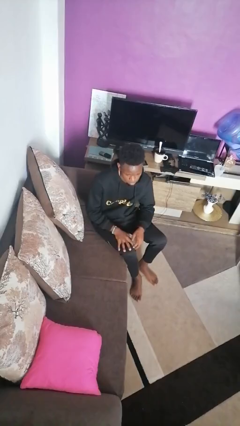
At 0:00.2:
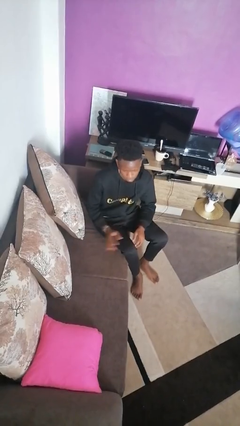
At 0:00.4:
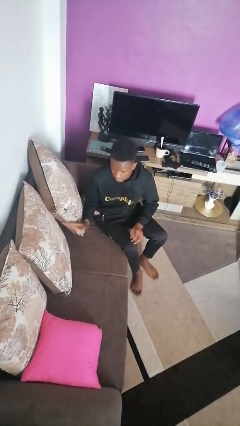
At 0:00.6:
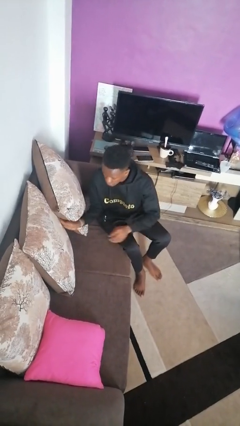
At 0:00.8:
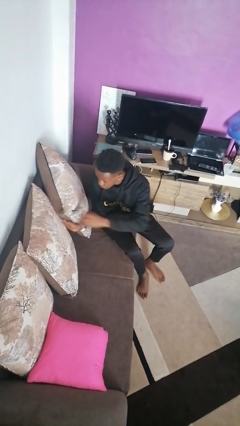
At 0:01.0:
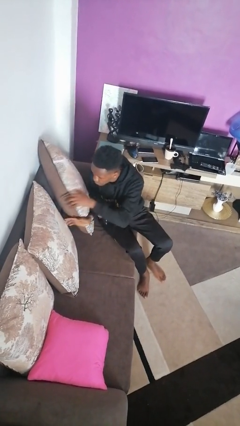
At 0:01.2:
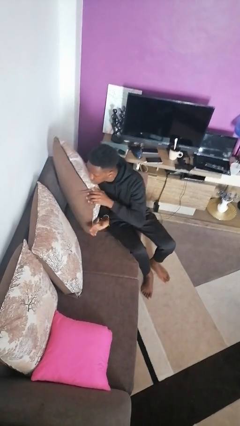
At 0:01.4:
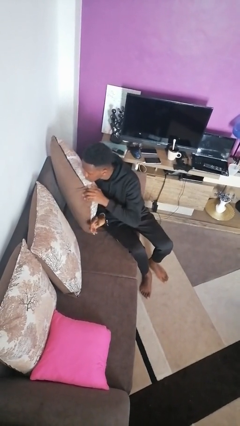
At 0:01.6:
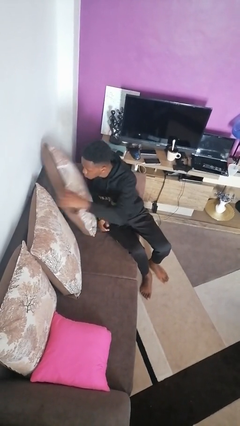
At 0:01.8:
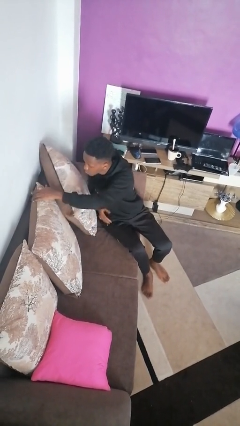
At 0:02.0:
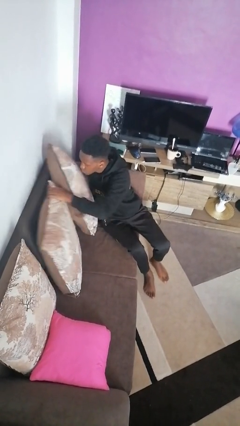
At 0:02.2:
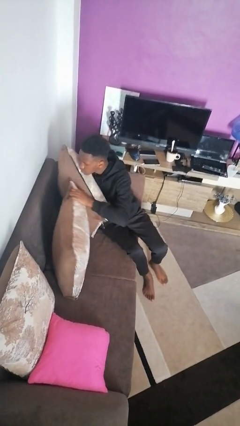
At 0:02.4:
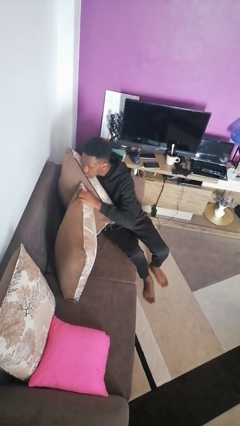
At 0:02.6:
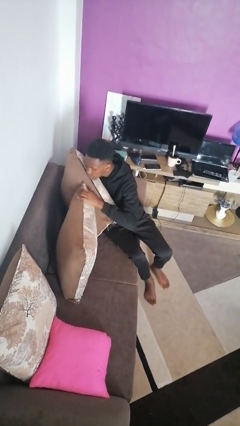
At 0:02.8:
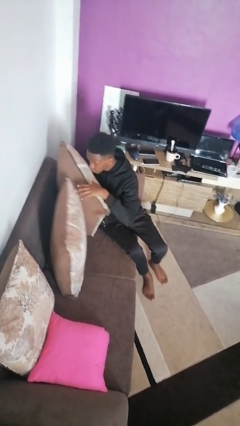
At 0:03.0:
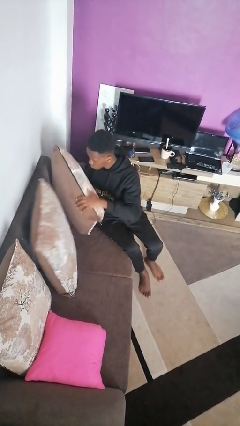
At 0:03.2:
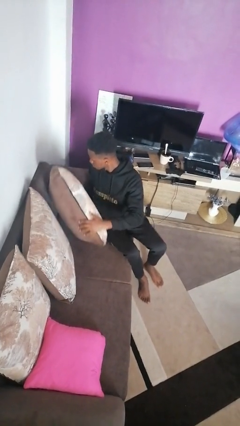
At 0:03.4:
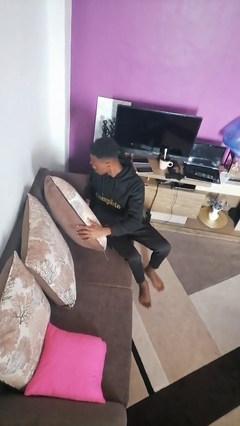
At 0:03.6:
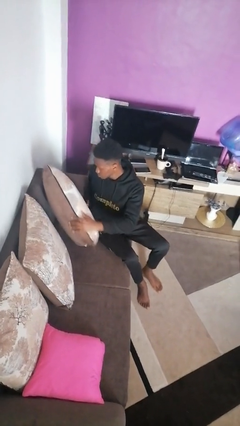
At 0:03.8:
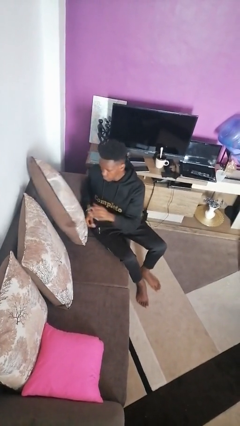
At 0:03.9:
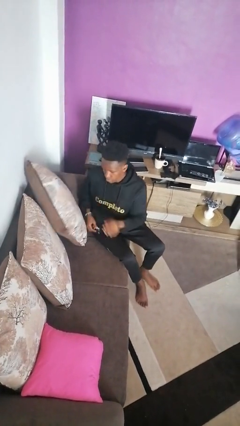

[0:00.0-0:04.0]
person searches in couch

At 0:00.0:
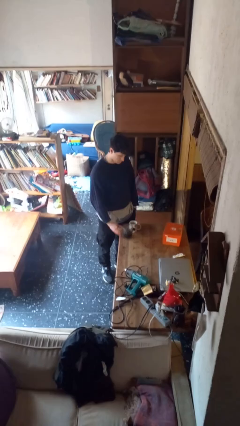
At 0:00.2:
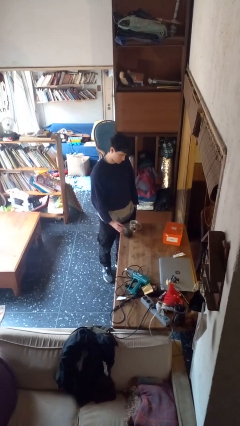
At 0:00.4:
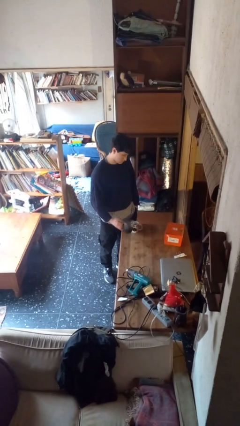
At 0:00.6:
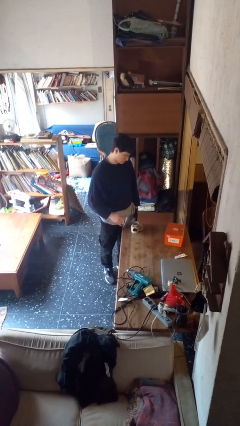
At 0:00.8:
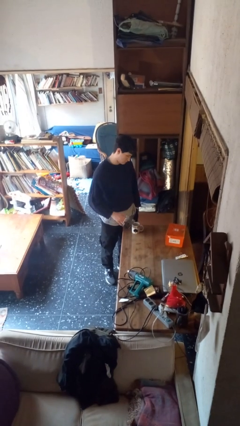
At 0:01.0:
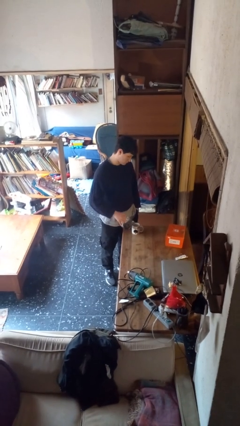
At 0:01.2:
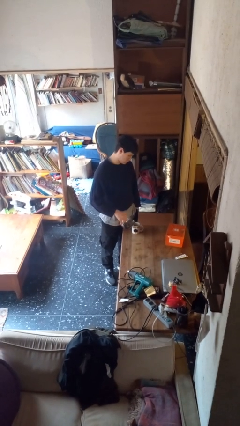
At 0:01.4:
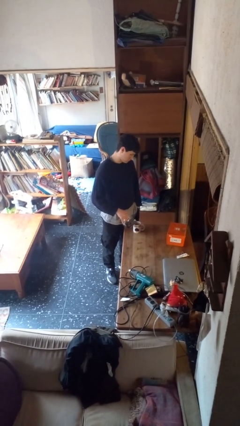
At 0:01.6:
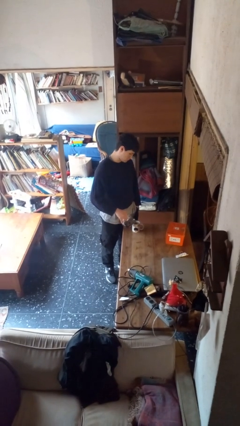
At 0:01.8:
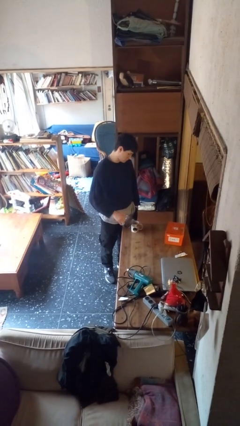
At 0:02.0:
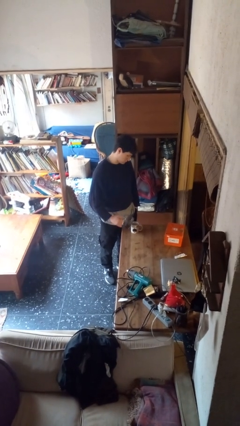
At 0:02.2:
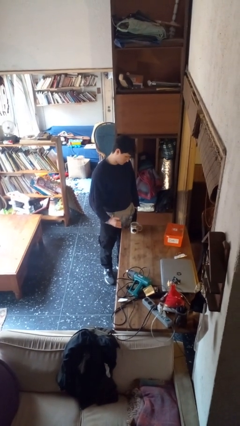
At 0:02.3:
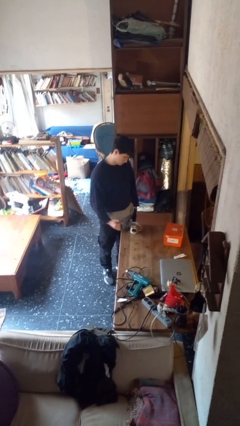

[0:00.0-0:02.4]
person pours coffee into mug

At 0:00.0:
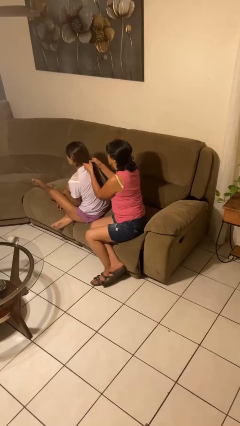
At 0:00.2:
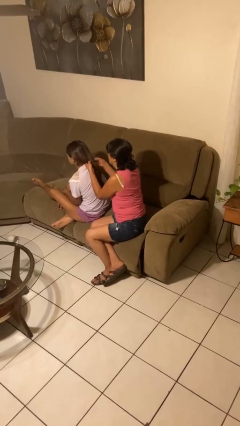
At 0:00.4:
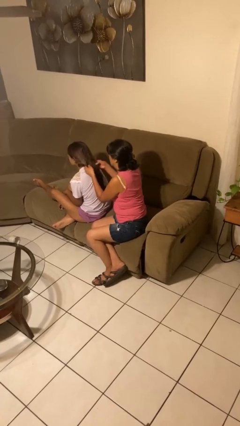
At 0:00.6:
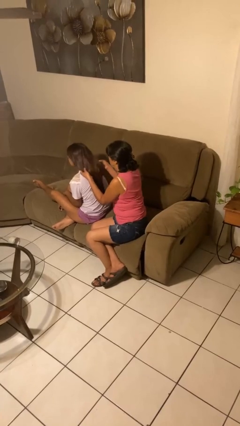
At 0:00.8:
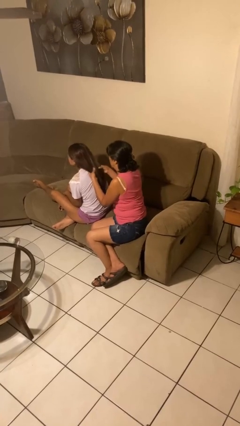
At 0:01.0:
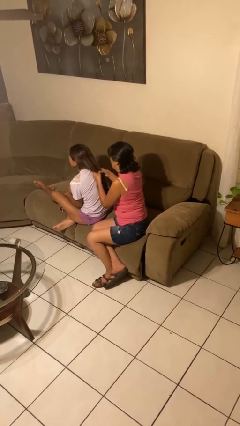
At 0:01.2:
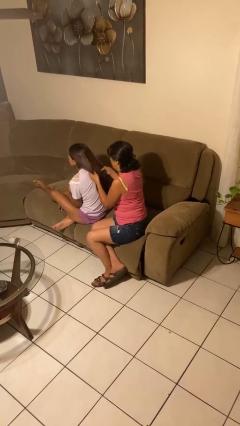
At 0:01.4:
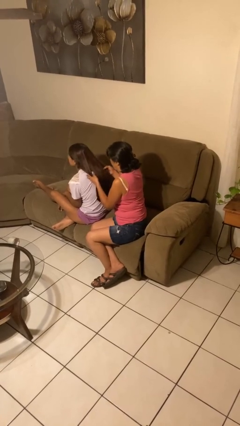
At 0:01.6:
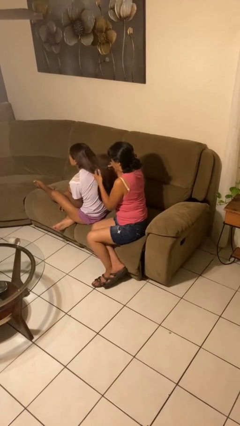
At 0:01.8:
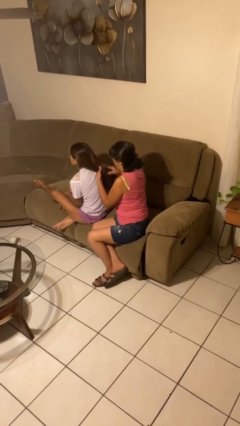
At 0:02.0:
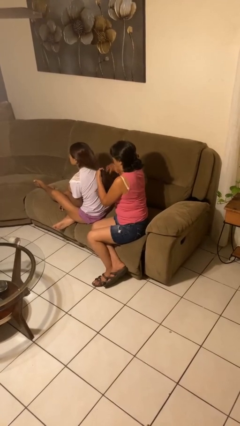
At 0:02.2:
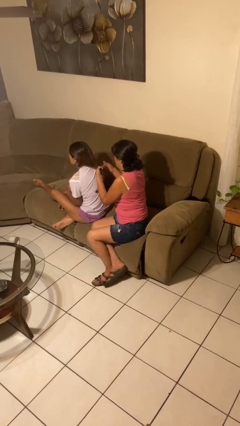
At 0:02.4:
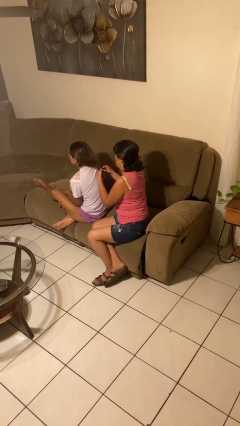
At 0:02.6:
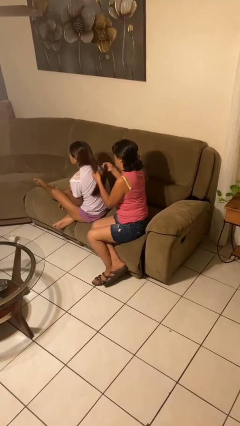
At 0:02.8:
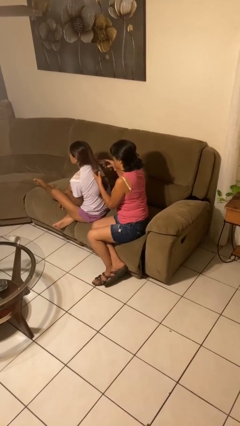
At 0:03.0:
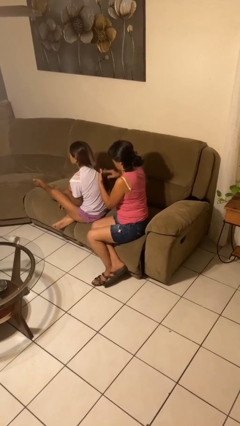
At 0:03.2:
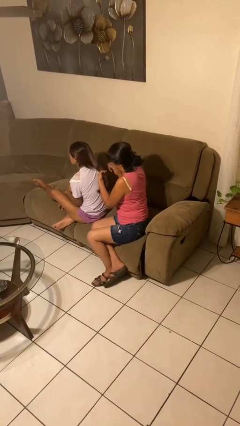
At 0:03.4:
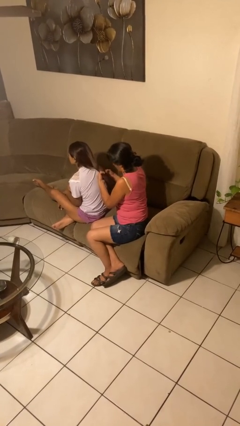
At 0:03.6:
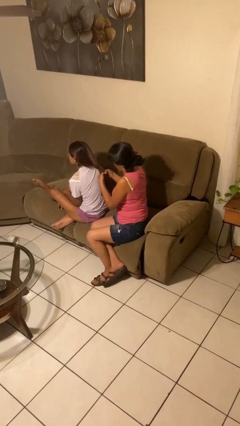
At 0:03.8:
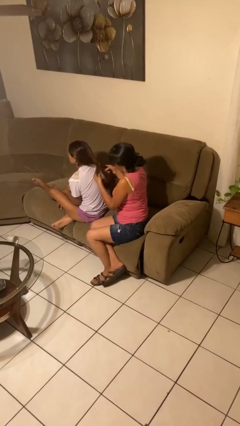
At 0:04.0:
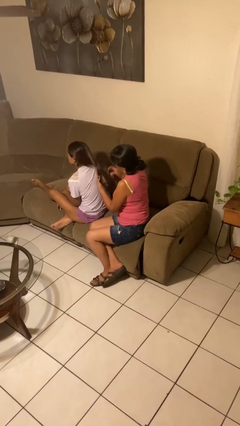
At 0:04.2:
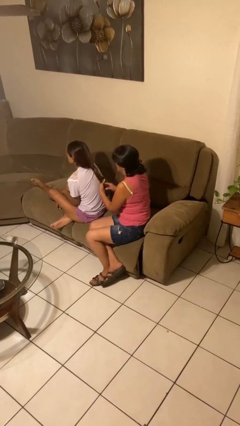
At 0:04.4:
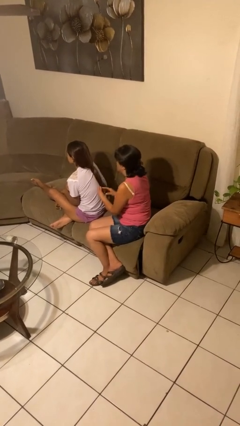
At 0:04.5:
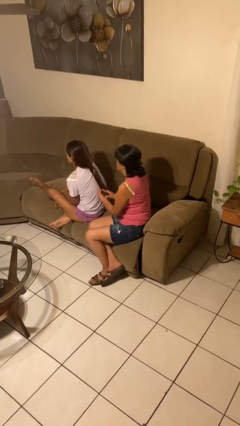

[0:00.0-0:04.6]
person braids hair of person

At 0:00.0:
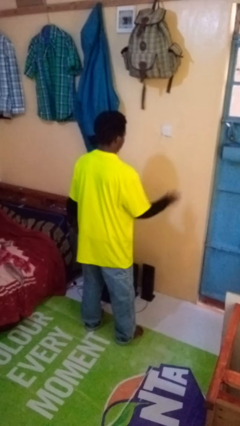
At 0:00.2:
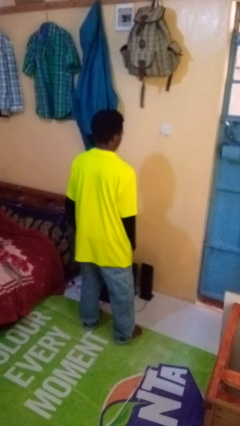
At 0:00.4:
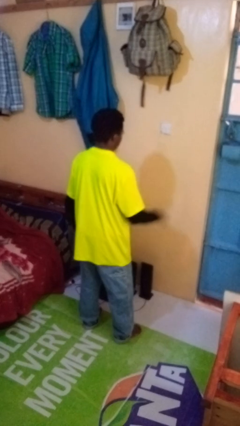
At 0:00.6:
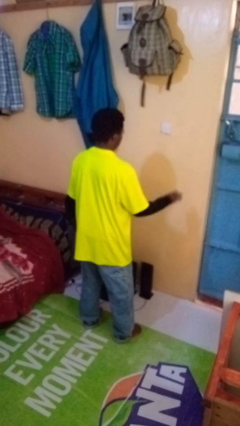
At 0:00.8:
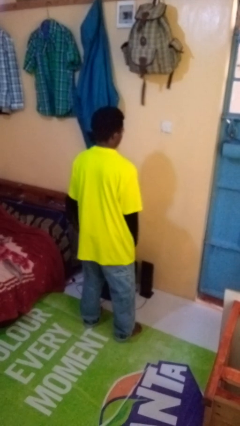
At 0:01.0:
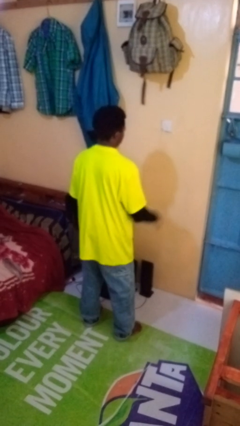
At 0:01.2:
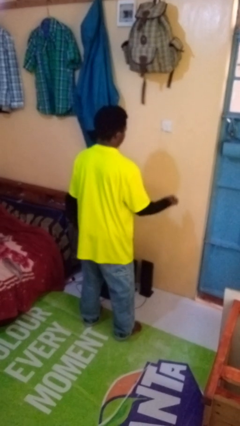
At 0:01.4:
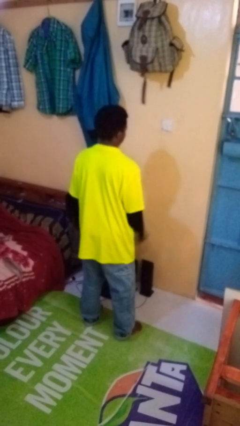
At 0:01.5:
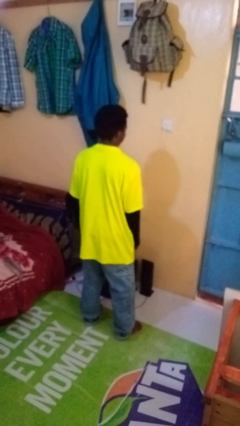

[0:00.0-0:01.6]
person slaps hands on thighs

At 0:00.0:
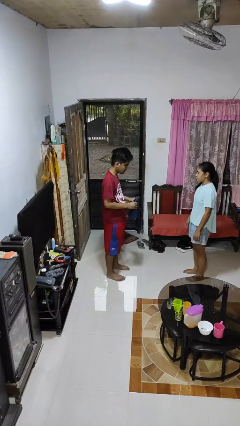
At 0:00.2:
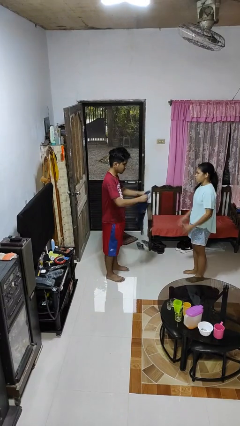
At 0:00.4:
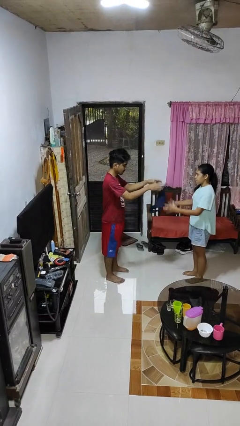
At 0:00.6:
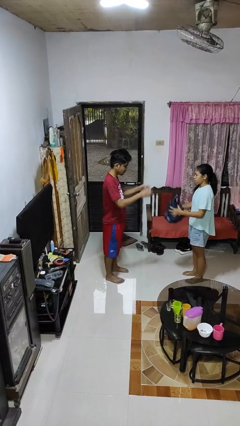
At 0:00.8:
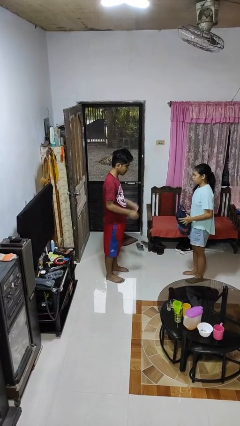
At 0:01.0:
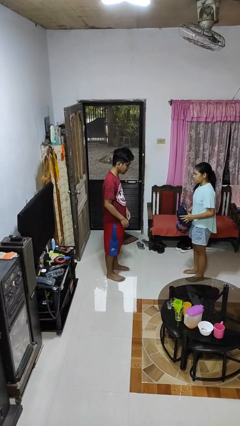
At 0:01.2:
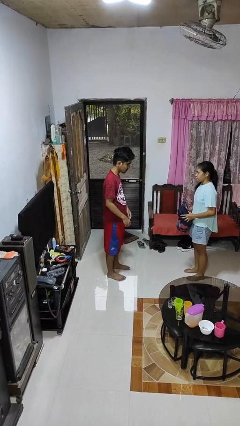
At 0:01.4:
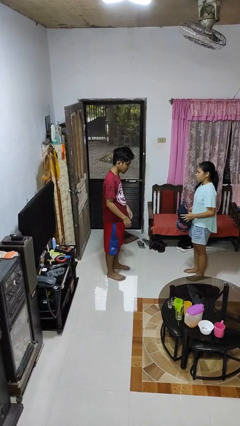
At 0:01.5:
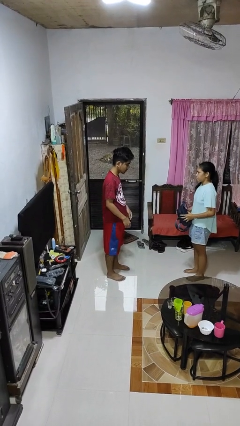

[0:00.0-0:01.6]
person throws object to person

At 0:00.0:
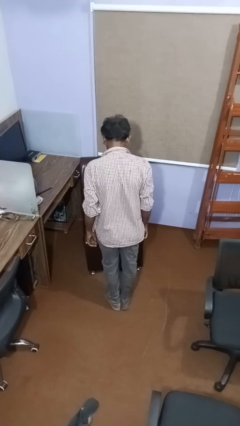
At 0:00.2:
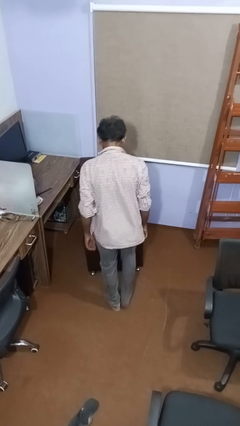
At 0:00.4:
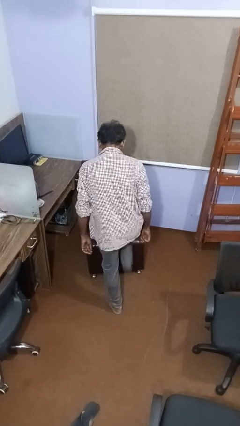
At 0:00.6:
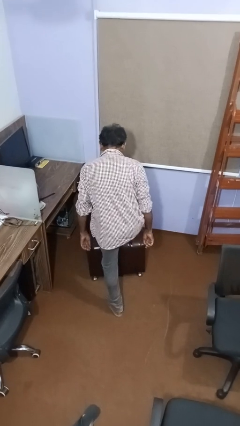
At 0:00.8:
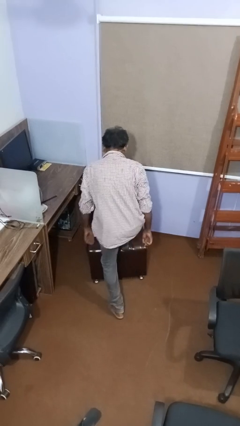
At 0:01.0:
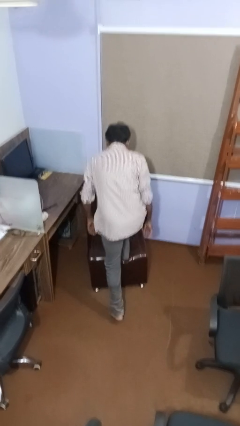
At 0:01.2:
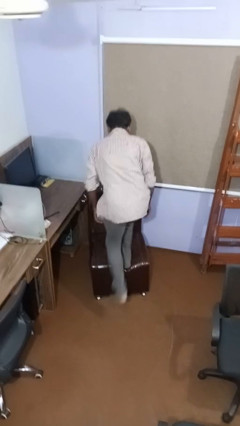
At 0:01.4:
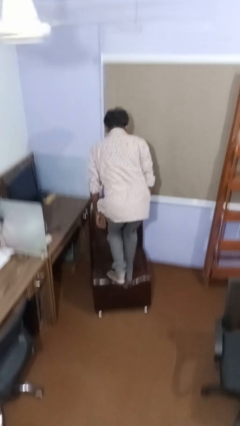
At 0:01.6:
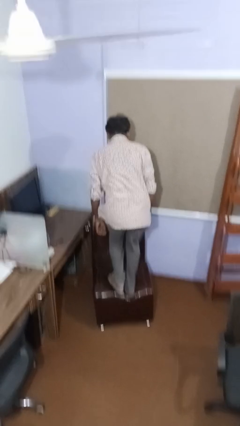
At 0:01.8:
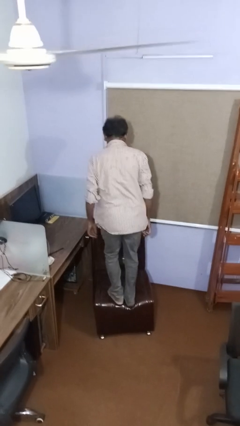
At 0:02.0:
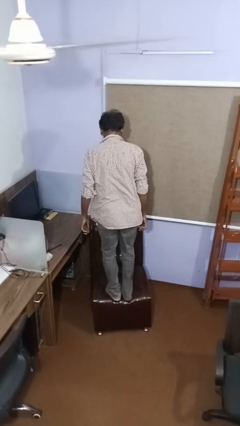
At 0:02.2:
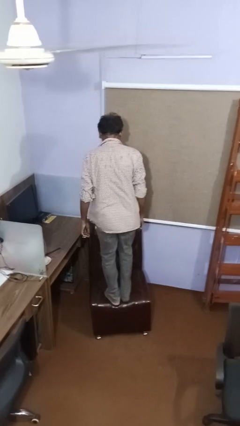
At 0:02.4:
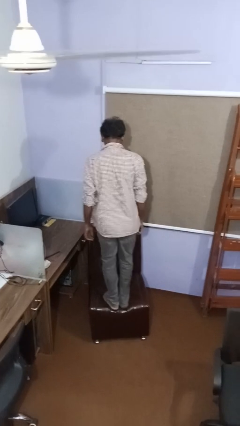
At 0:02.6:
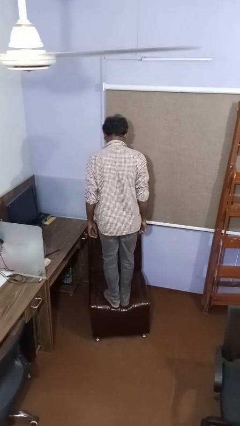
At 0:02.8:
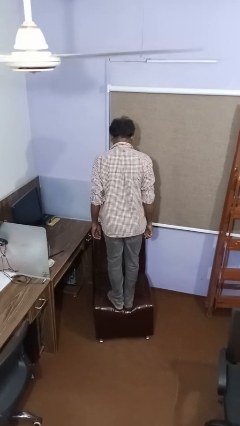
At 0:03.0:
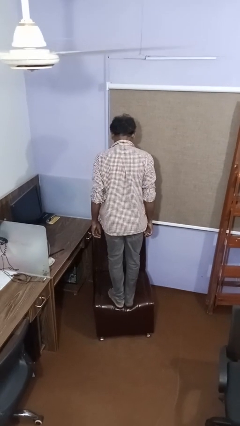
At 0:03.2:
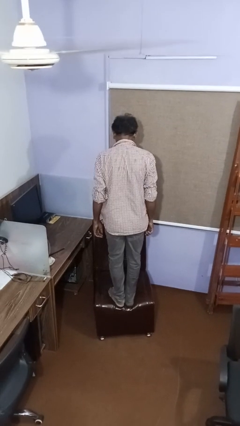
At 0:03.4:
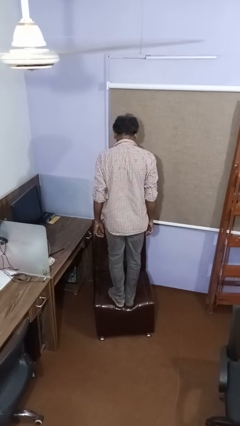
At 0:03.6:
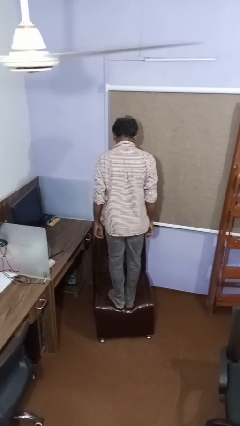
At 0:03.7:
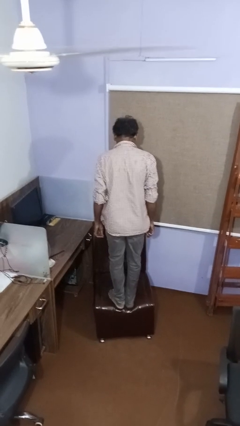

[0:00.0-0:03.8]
person climbs on couch
